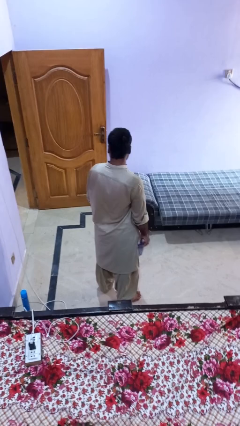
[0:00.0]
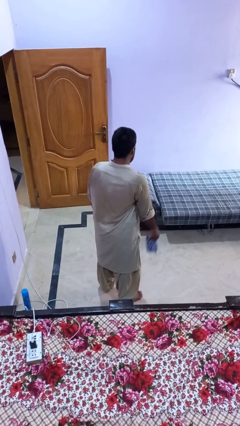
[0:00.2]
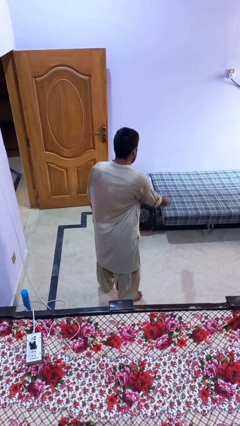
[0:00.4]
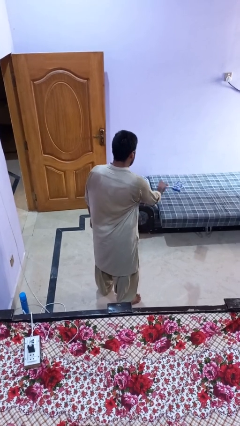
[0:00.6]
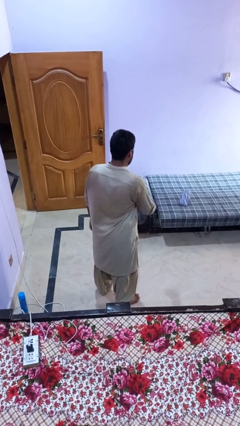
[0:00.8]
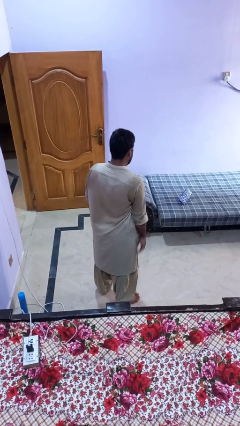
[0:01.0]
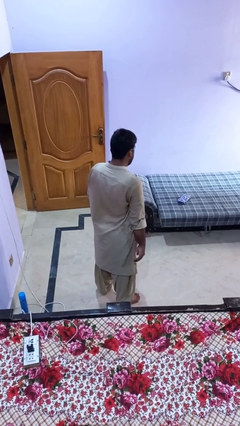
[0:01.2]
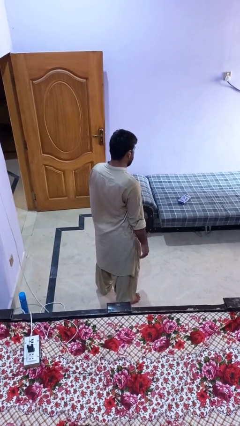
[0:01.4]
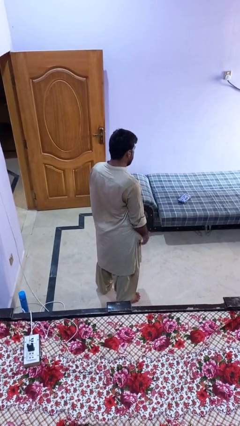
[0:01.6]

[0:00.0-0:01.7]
person throws object on bed

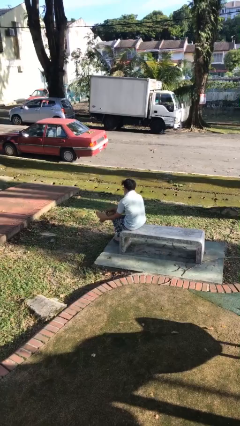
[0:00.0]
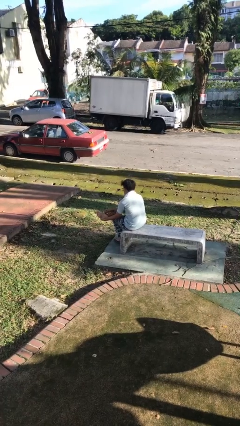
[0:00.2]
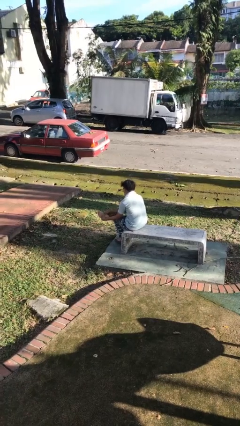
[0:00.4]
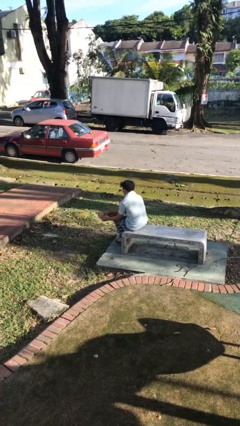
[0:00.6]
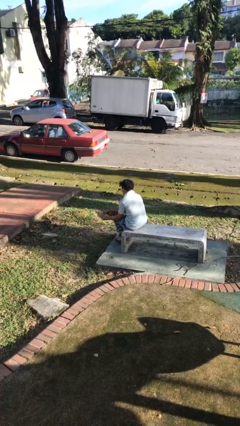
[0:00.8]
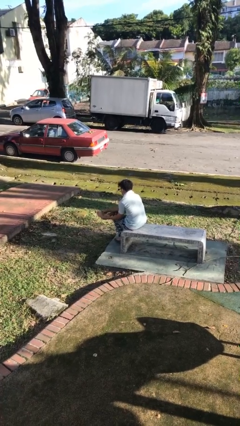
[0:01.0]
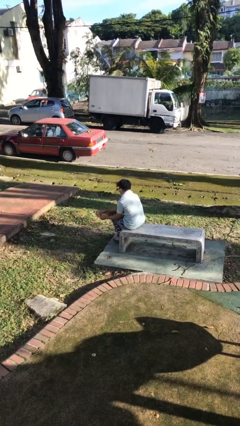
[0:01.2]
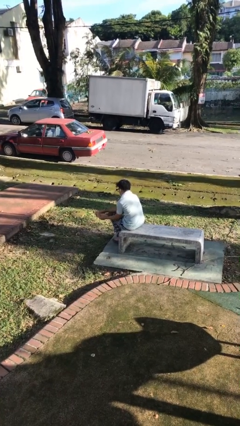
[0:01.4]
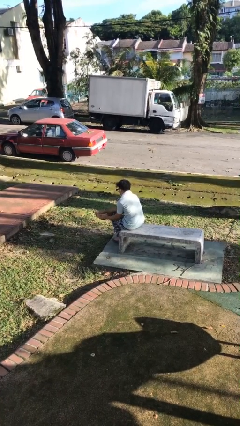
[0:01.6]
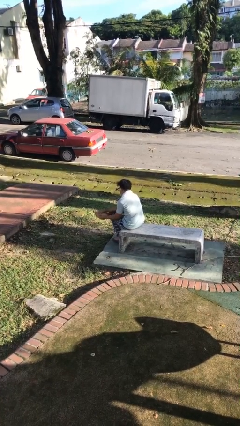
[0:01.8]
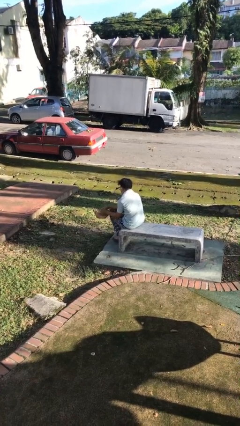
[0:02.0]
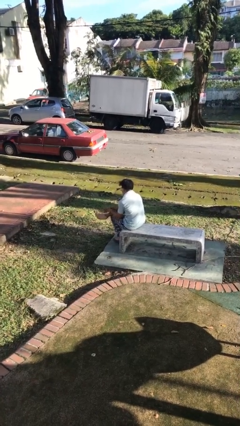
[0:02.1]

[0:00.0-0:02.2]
person rubs foot

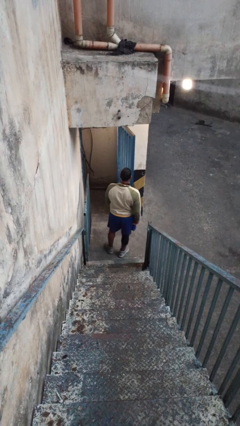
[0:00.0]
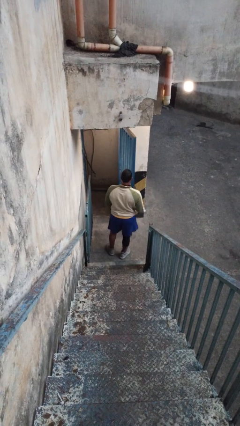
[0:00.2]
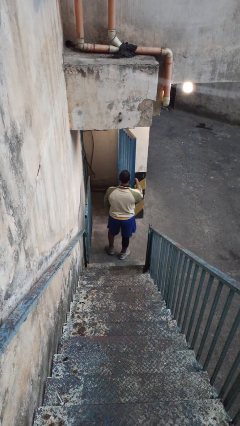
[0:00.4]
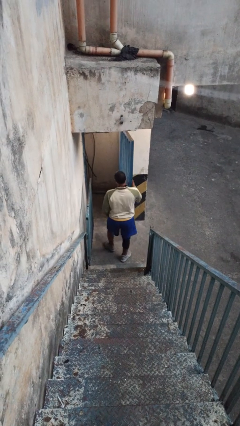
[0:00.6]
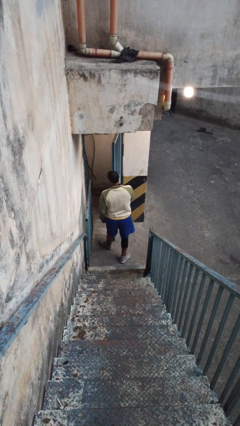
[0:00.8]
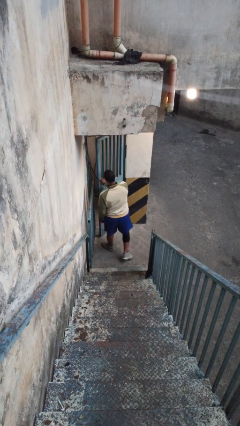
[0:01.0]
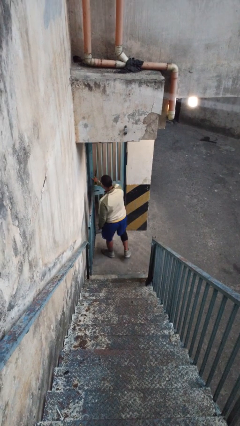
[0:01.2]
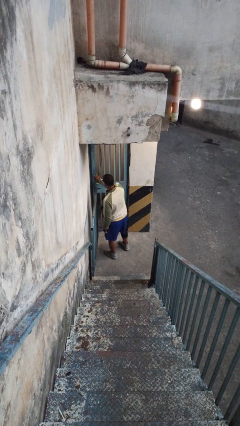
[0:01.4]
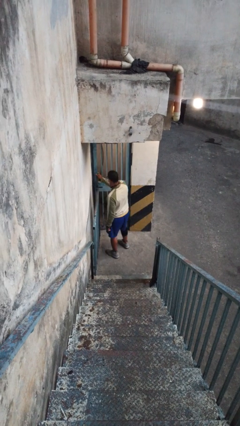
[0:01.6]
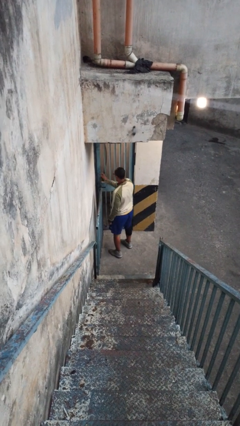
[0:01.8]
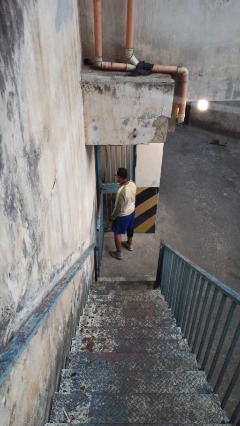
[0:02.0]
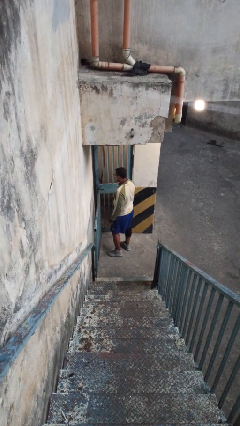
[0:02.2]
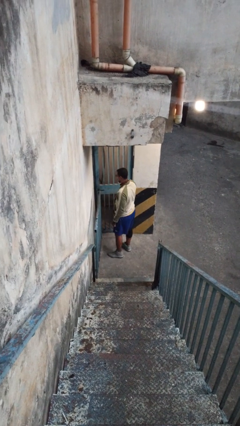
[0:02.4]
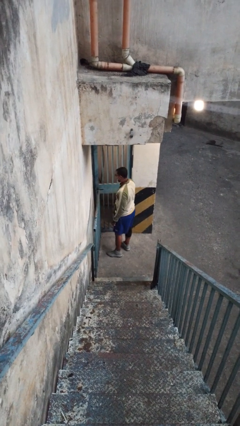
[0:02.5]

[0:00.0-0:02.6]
person closes facility door

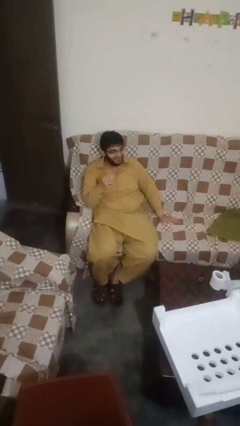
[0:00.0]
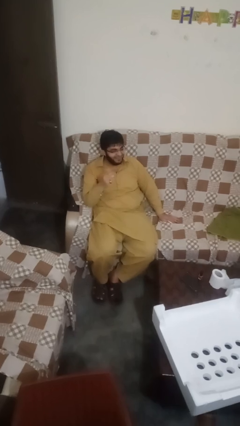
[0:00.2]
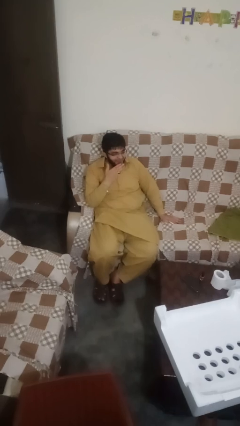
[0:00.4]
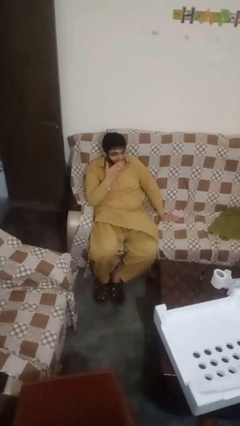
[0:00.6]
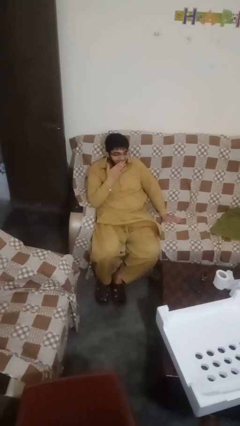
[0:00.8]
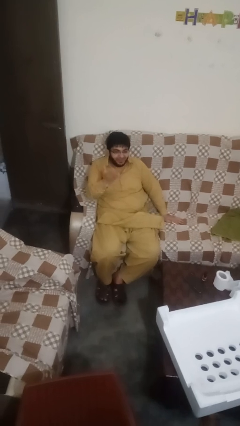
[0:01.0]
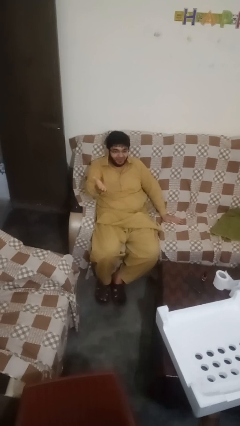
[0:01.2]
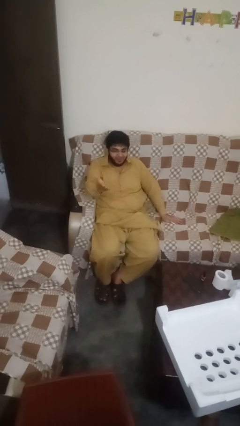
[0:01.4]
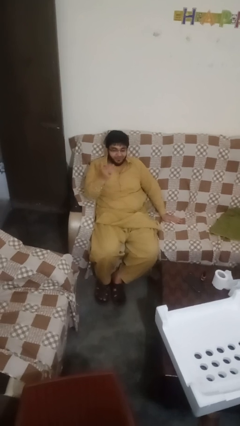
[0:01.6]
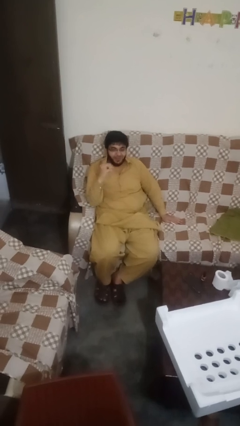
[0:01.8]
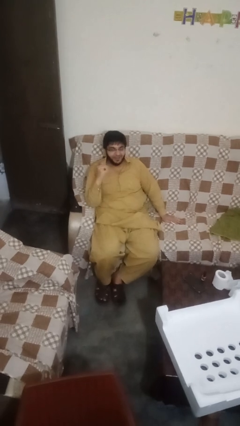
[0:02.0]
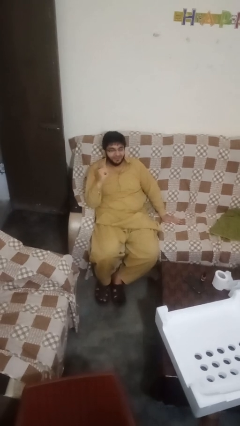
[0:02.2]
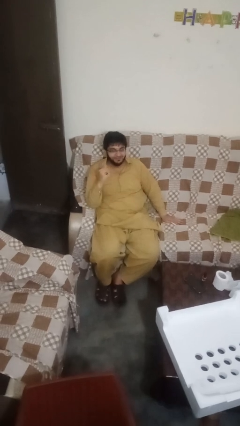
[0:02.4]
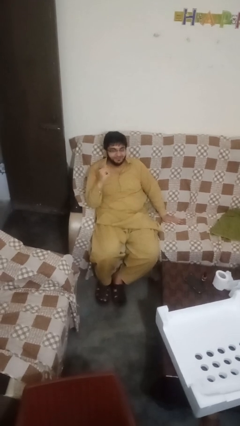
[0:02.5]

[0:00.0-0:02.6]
person gestures blow kiss

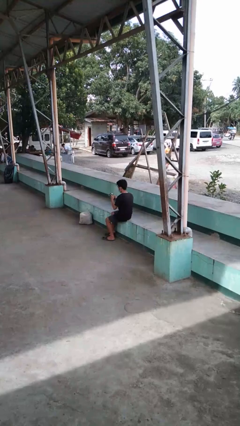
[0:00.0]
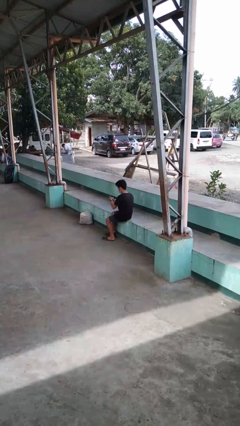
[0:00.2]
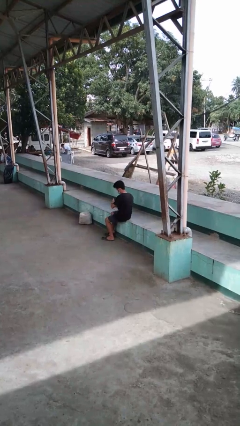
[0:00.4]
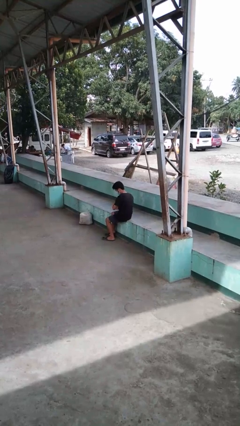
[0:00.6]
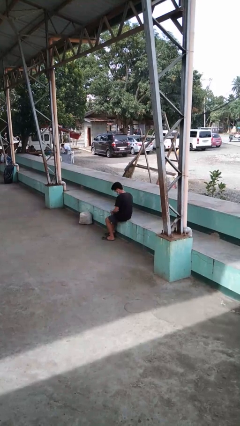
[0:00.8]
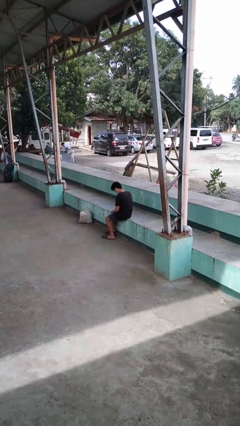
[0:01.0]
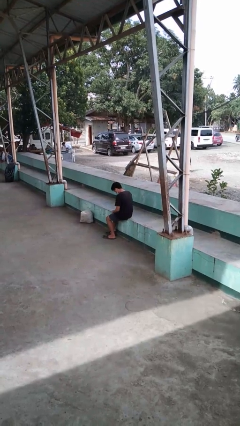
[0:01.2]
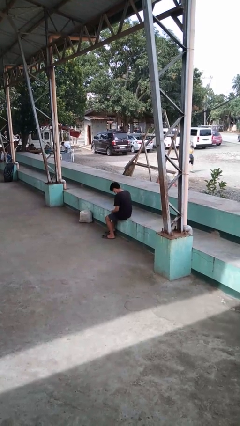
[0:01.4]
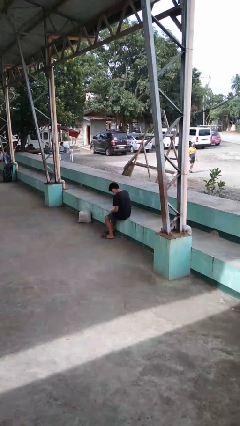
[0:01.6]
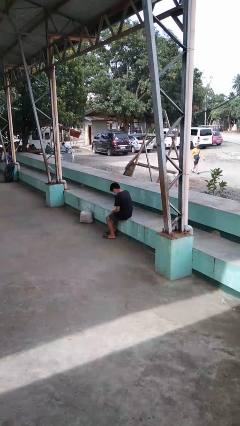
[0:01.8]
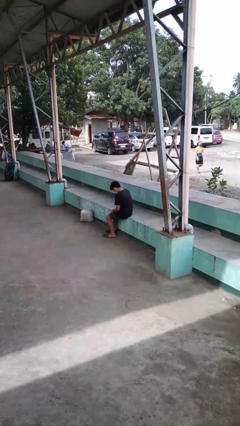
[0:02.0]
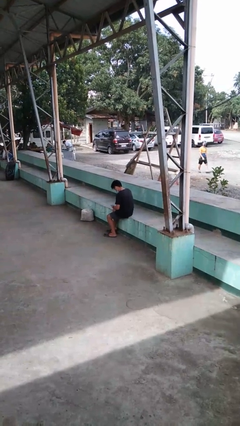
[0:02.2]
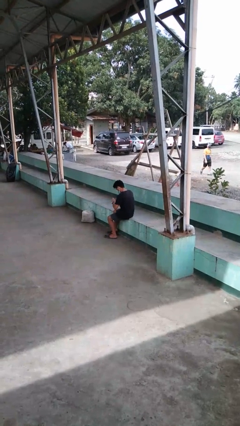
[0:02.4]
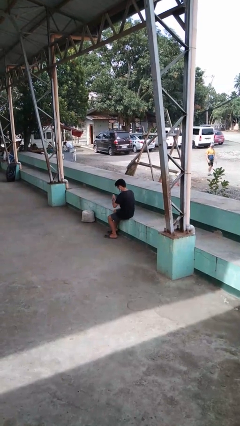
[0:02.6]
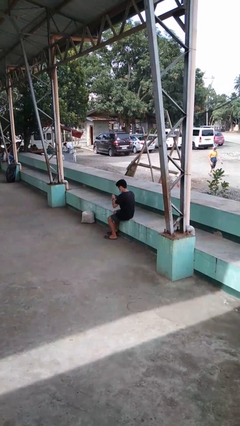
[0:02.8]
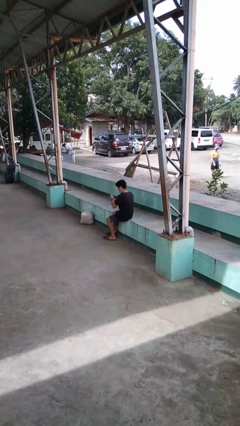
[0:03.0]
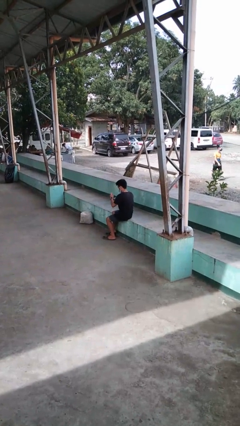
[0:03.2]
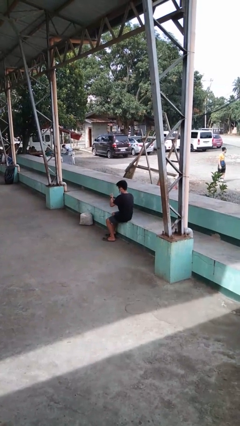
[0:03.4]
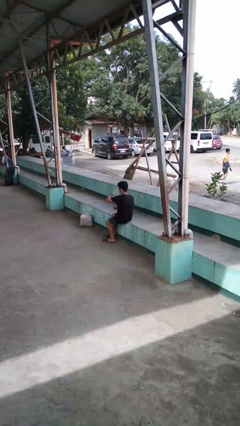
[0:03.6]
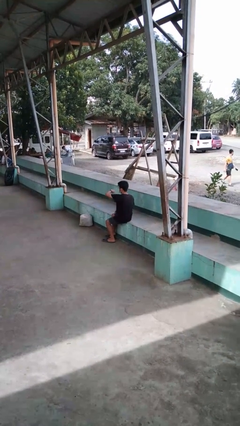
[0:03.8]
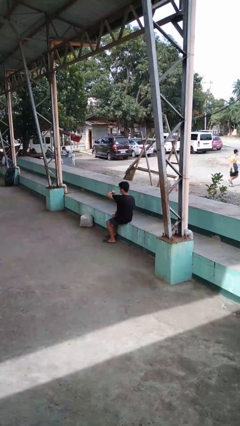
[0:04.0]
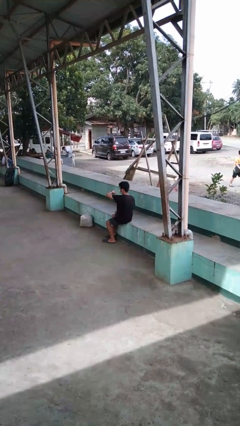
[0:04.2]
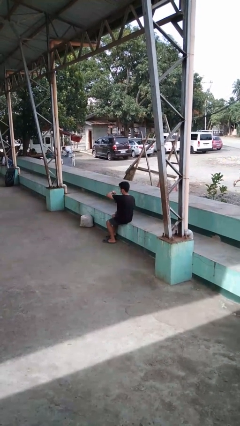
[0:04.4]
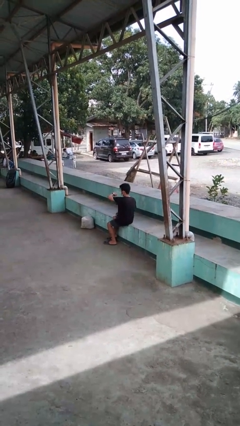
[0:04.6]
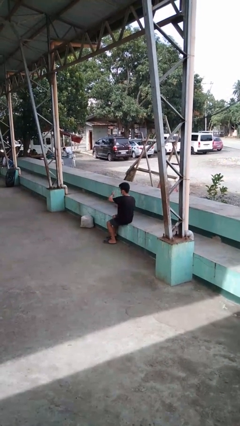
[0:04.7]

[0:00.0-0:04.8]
person puts on wristwatch

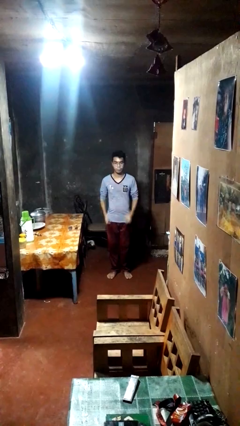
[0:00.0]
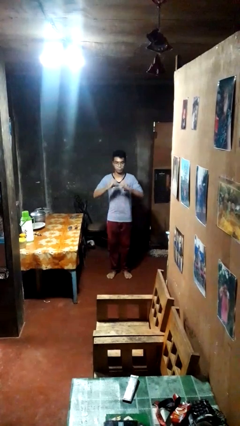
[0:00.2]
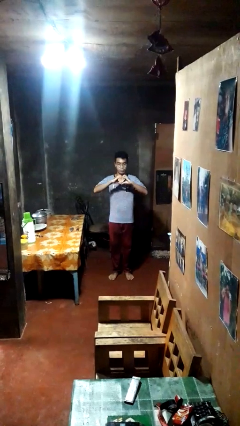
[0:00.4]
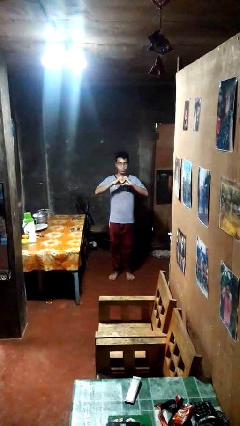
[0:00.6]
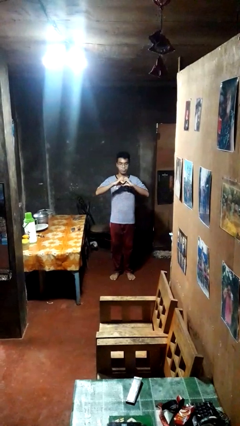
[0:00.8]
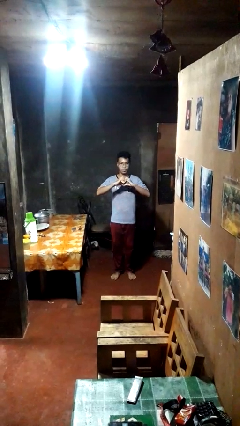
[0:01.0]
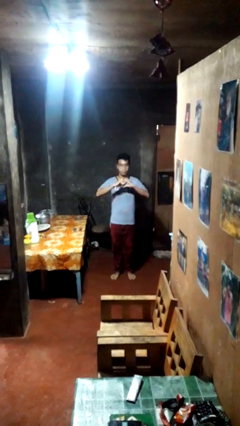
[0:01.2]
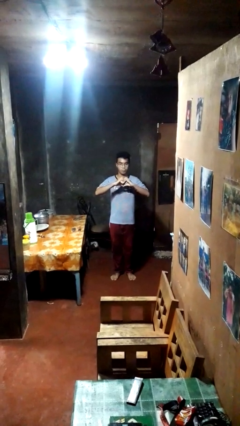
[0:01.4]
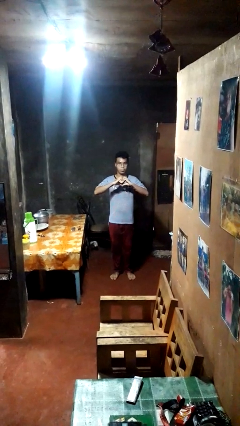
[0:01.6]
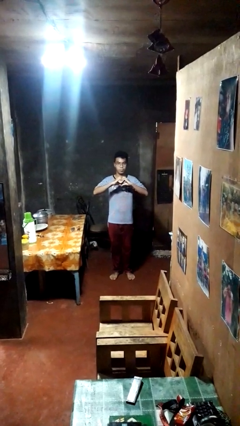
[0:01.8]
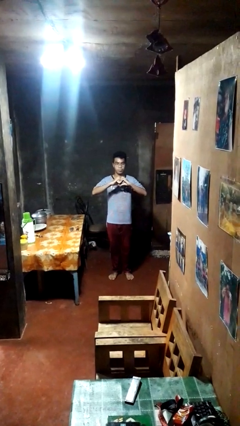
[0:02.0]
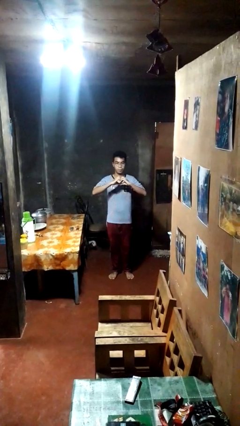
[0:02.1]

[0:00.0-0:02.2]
person gestures heart

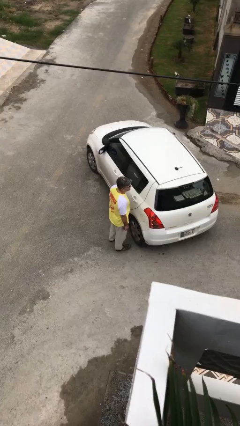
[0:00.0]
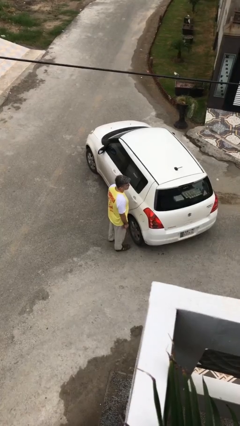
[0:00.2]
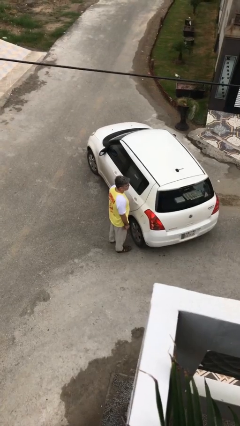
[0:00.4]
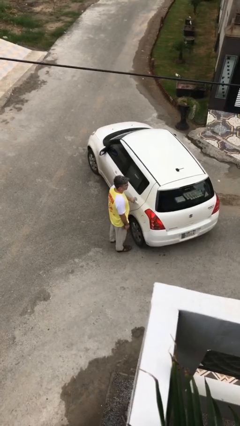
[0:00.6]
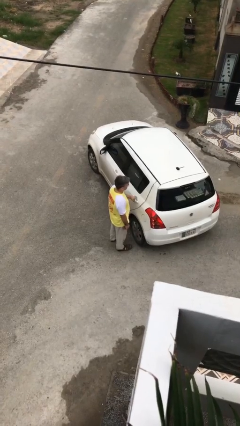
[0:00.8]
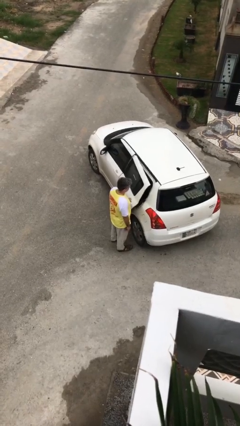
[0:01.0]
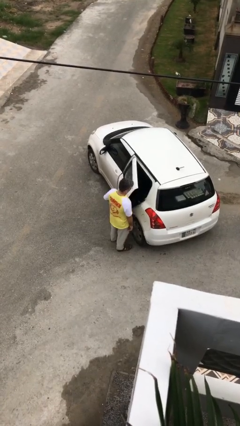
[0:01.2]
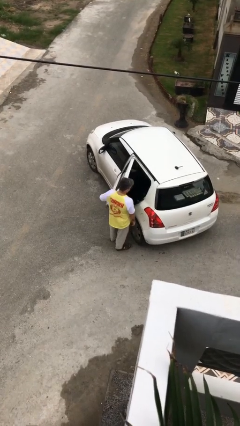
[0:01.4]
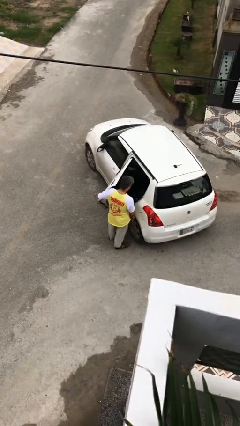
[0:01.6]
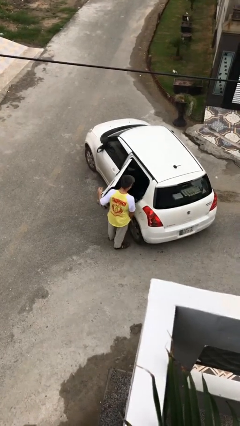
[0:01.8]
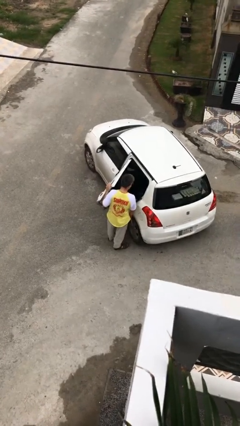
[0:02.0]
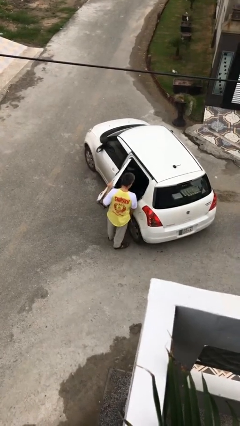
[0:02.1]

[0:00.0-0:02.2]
person opens car door
